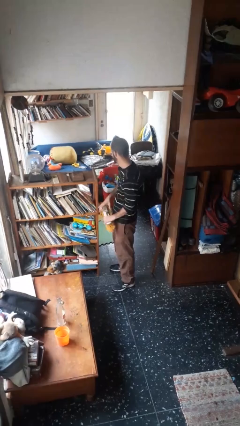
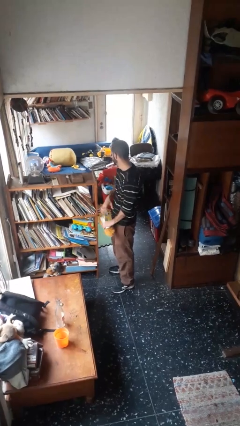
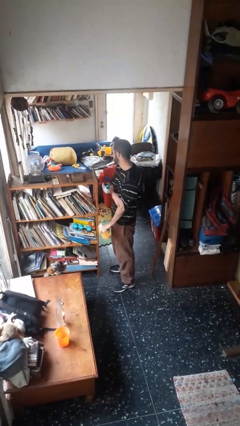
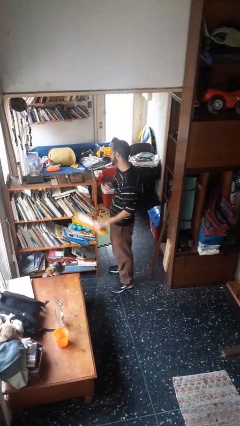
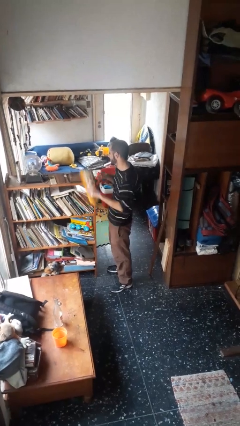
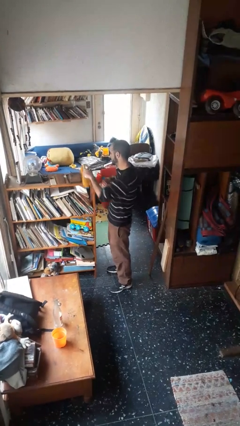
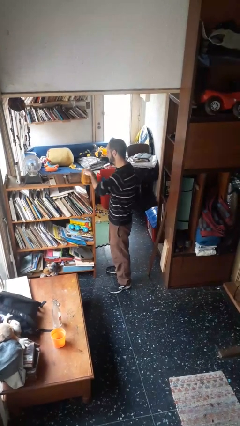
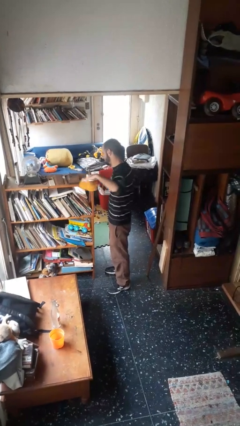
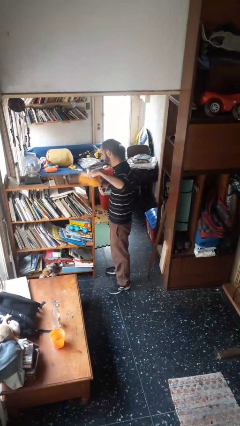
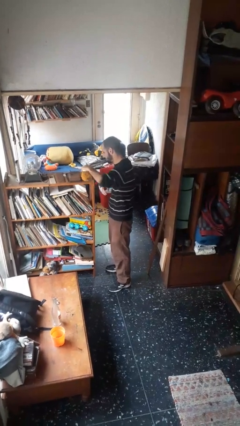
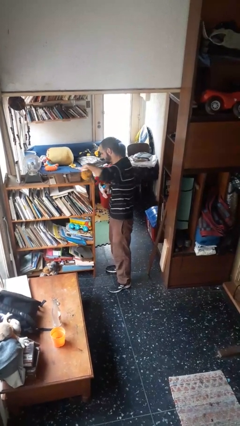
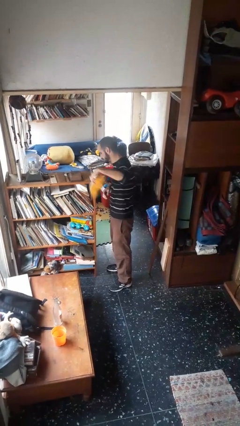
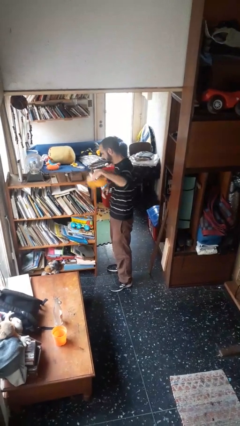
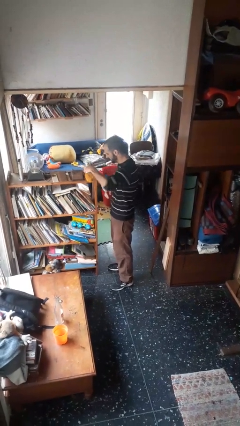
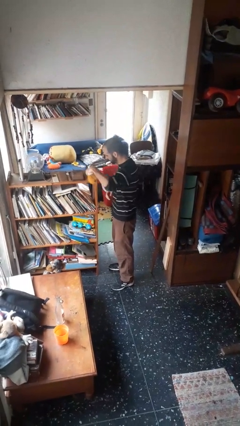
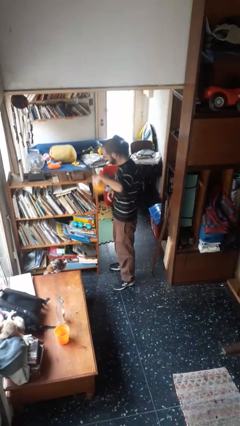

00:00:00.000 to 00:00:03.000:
person dusts furniture

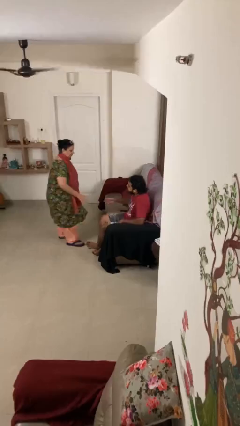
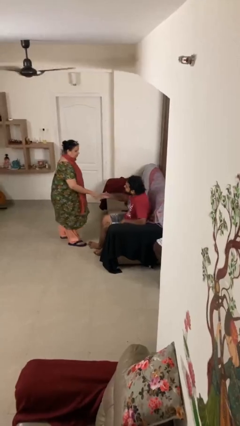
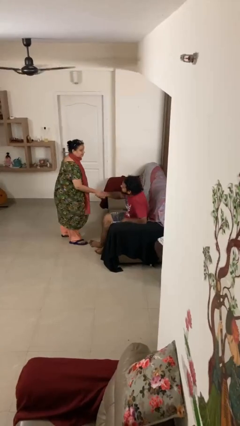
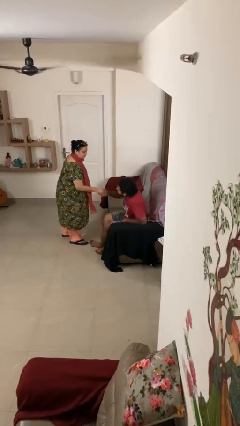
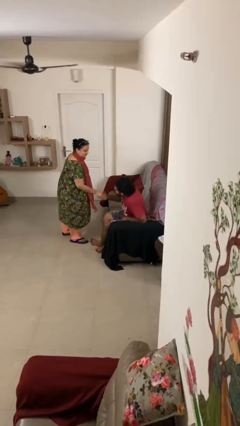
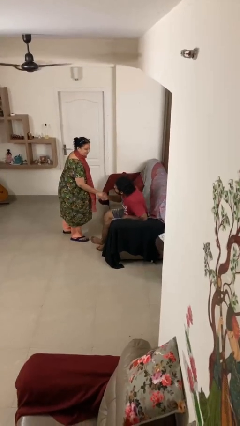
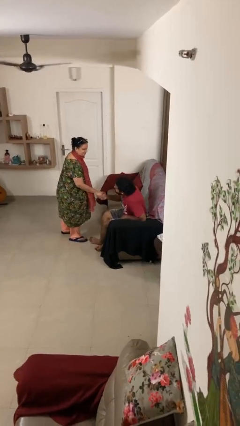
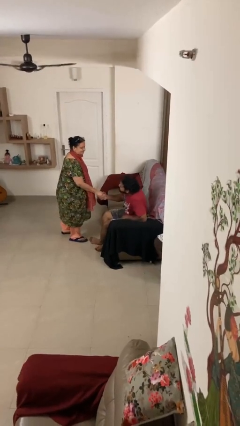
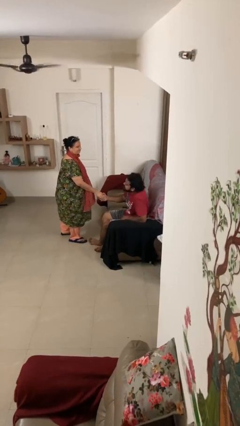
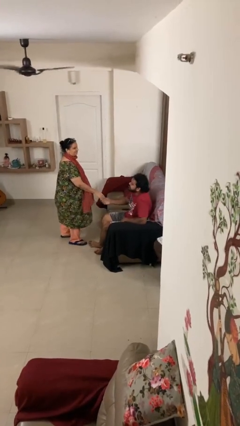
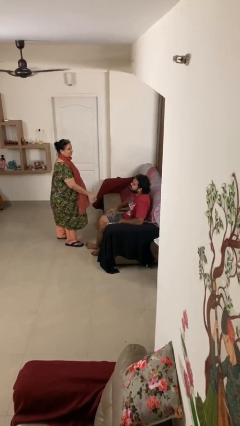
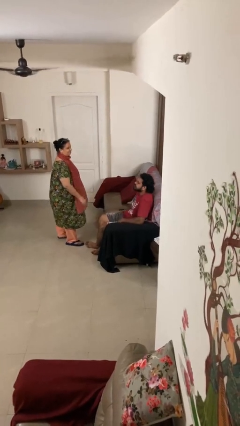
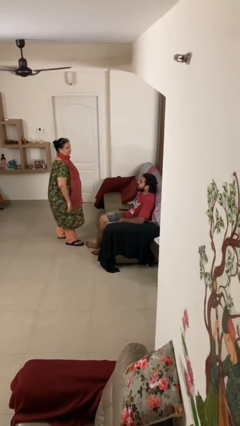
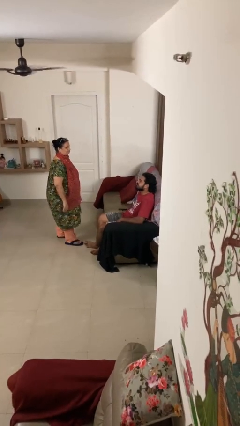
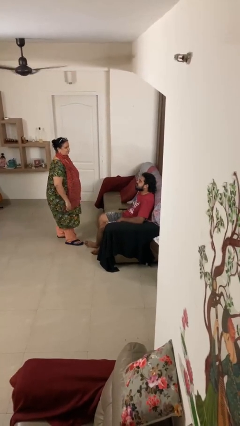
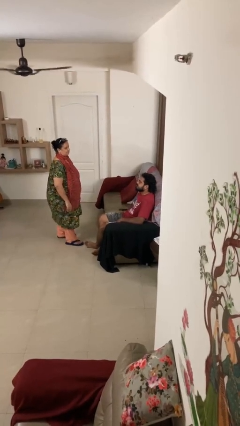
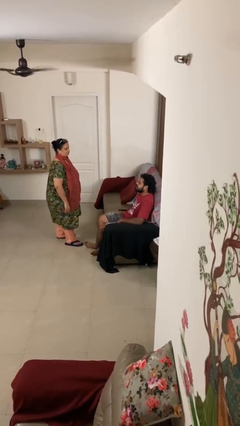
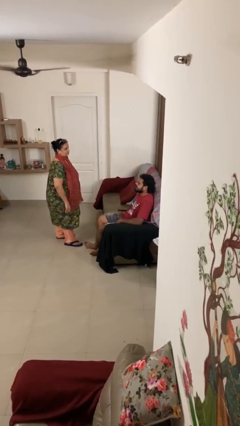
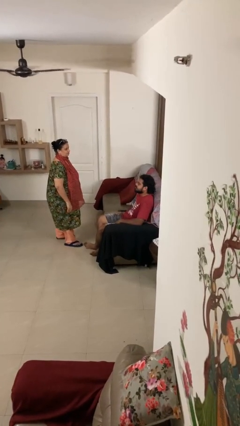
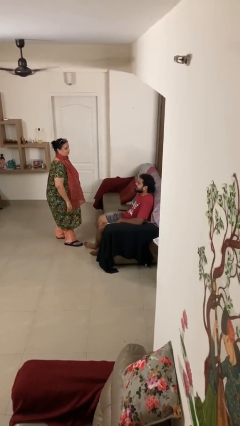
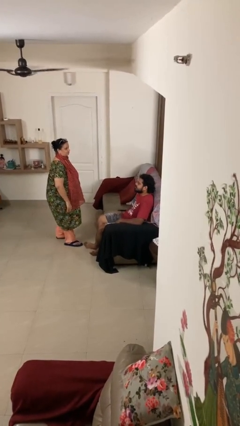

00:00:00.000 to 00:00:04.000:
person shakes hand

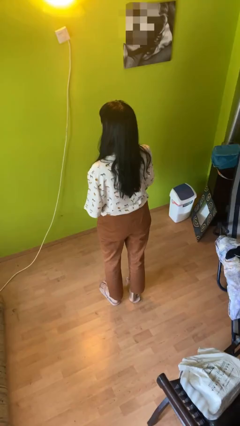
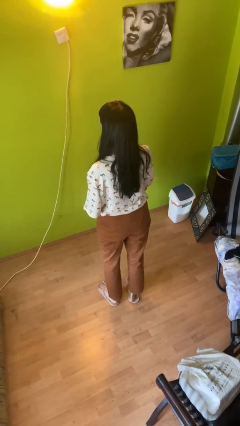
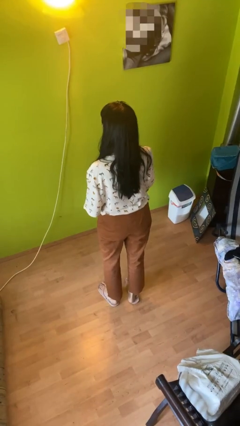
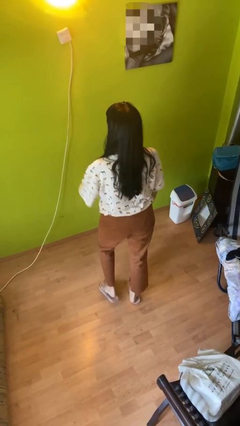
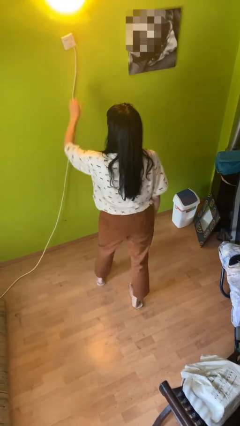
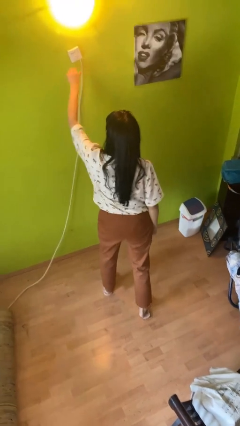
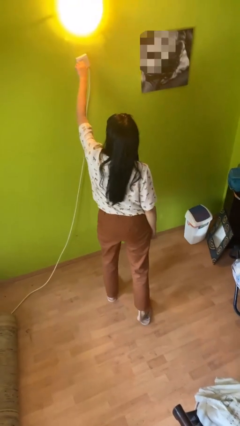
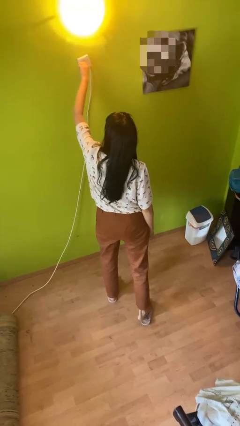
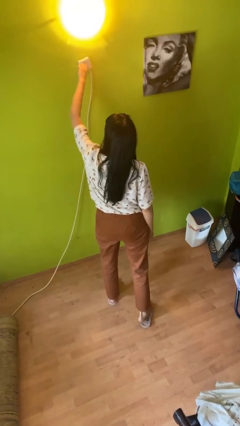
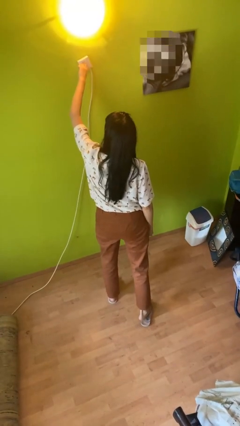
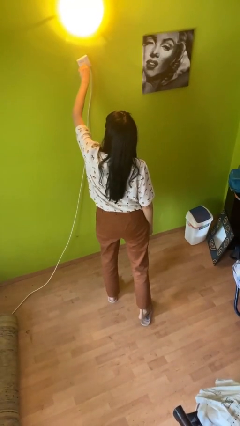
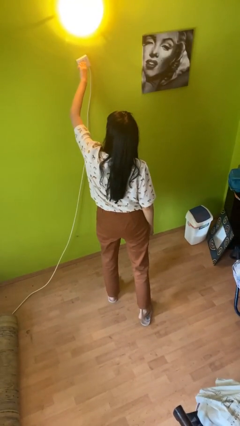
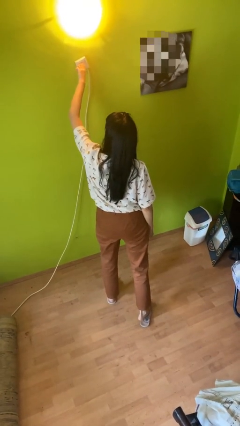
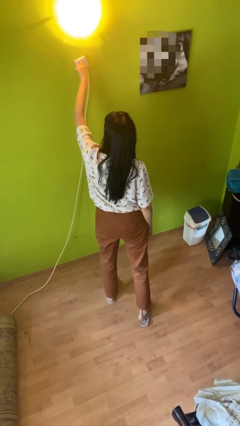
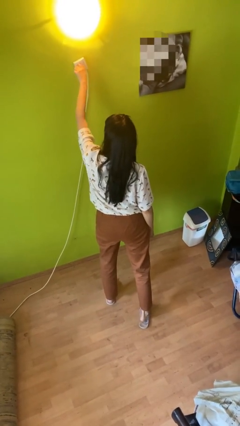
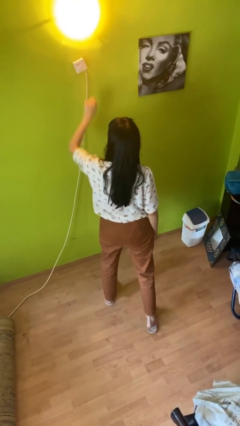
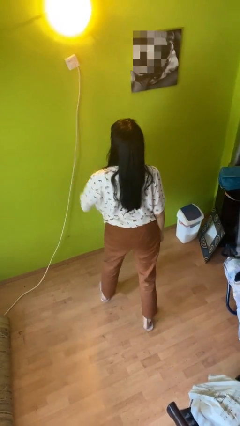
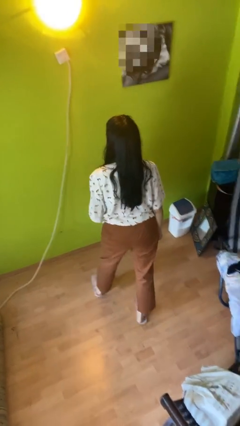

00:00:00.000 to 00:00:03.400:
person adjusts thermostat

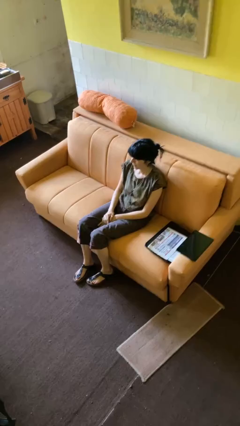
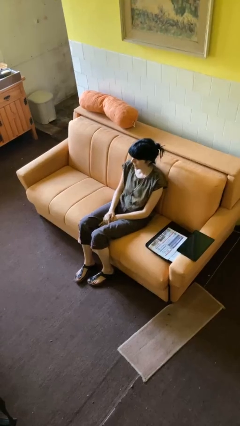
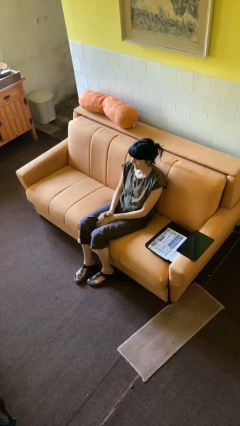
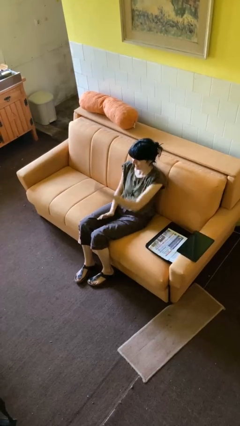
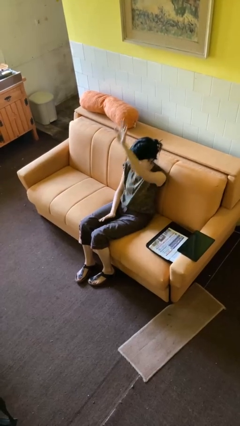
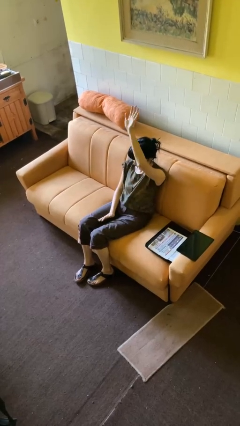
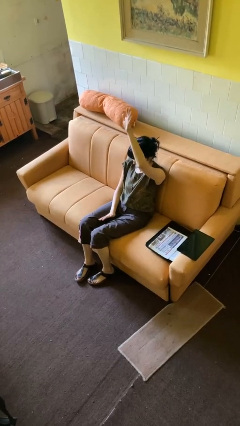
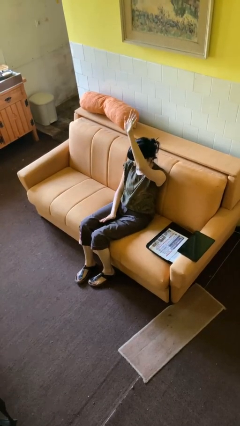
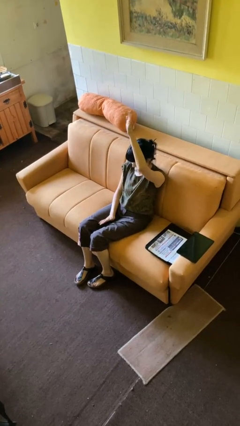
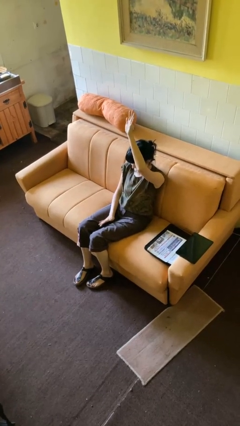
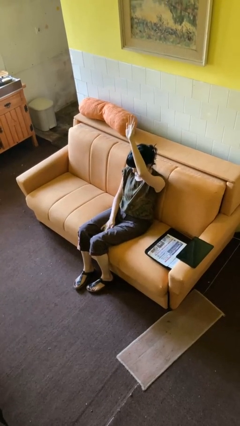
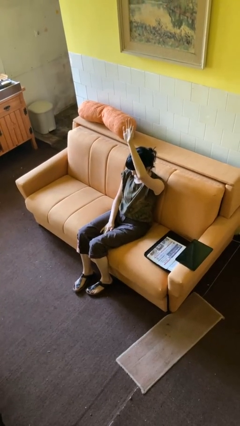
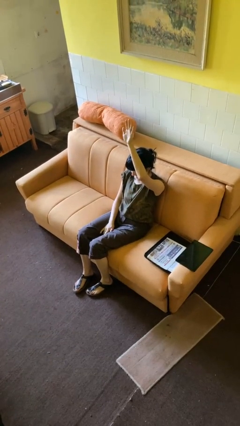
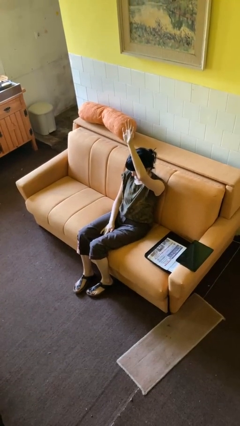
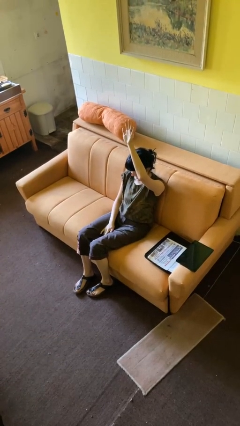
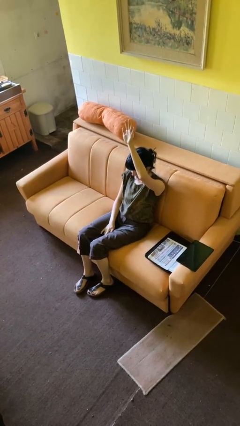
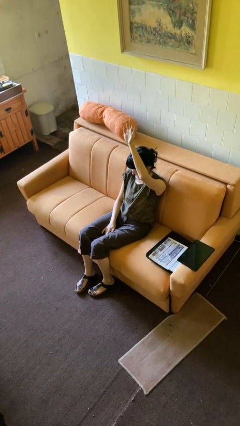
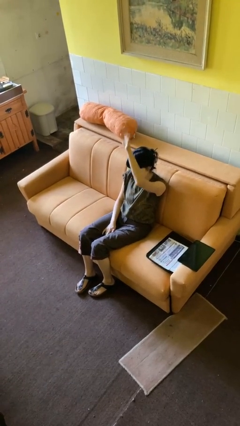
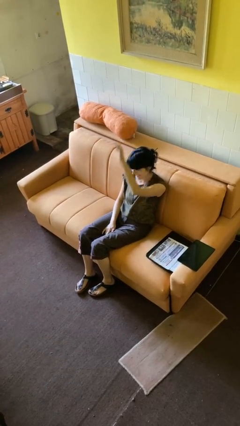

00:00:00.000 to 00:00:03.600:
person waves at person

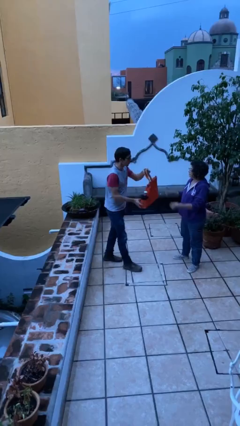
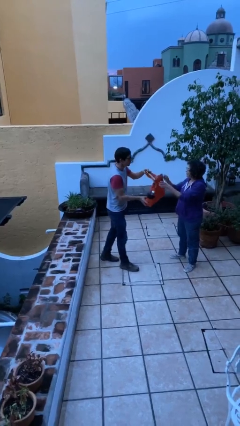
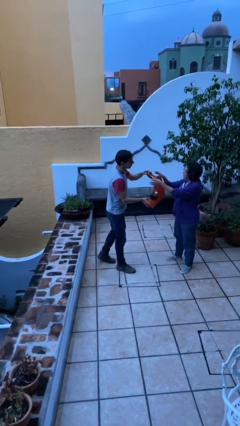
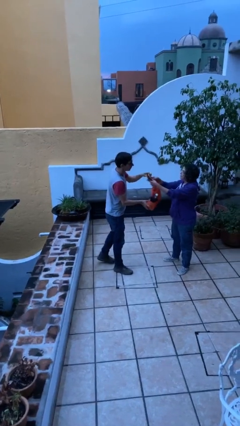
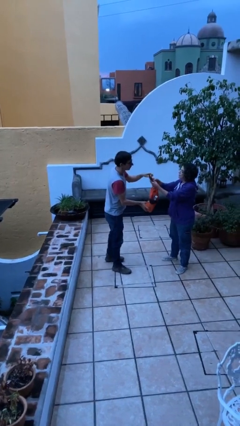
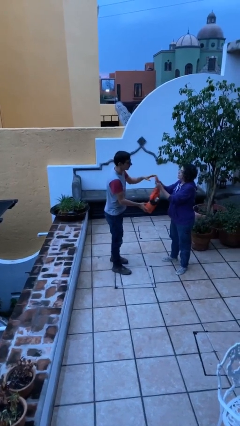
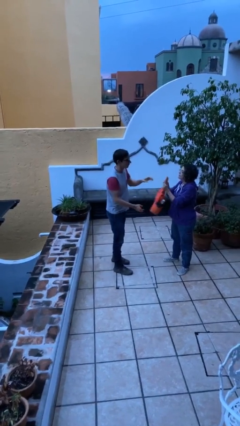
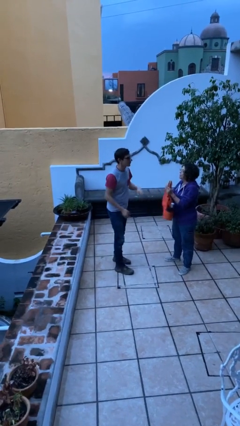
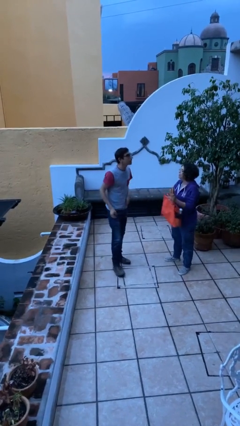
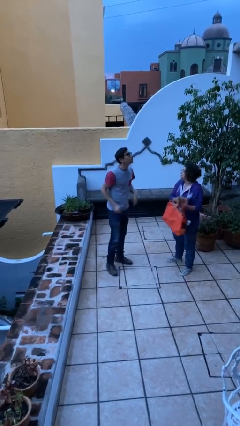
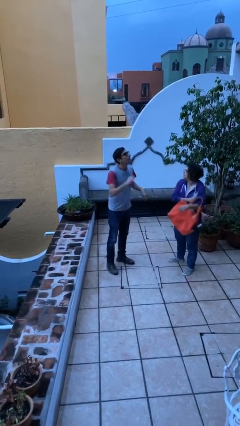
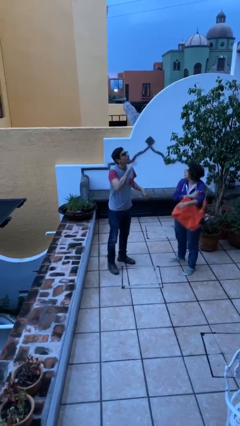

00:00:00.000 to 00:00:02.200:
person transfers object to person

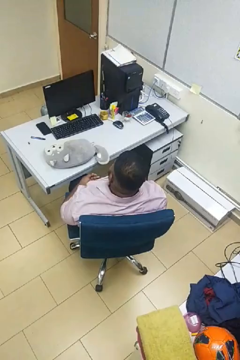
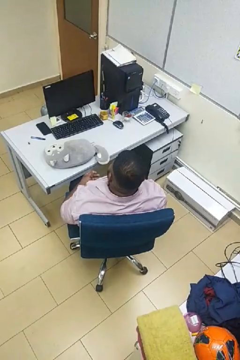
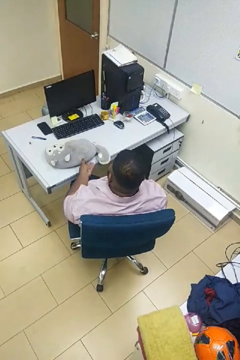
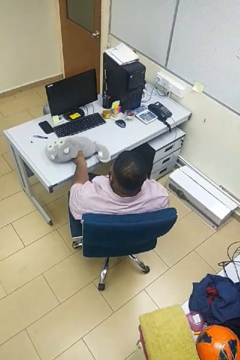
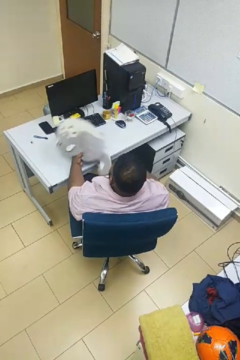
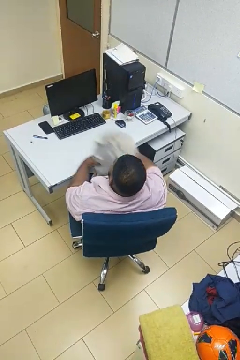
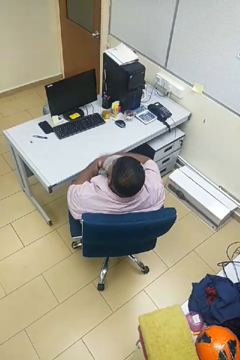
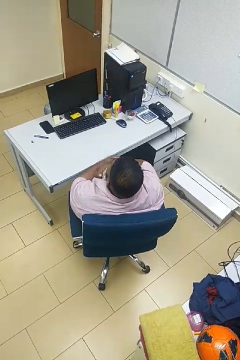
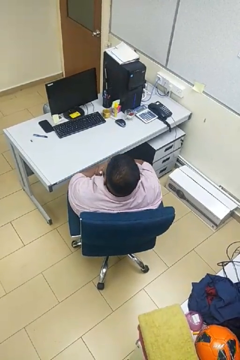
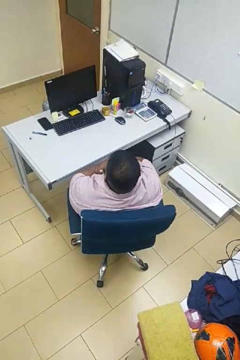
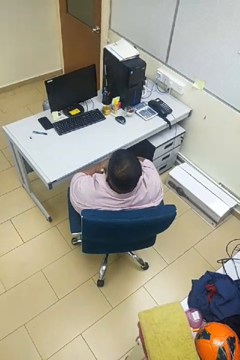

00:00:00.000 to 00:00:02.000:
person hugs stuffed animal
